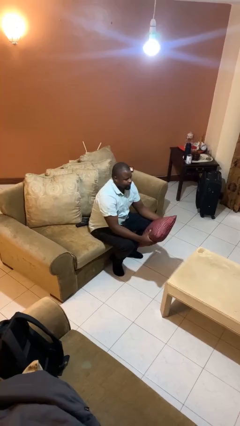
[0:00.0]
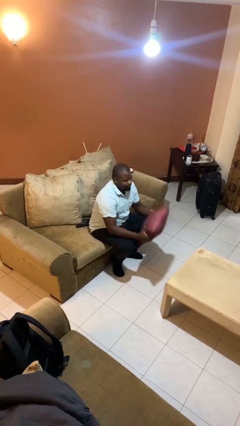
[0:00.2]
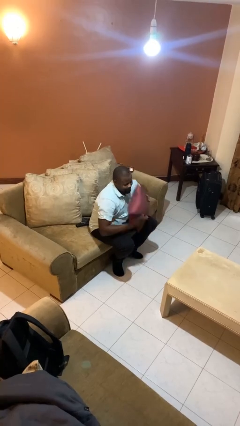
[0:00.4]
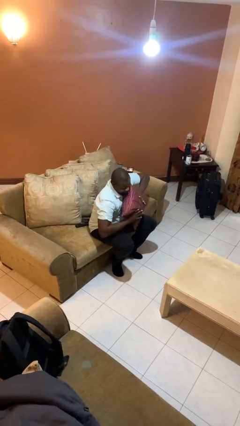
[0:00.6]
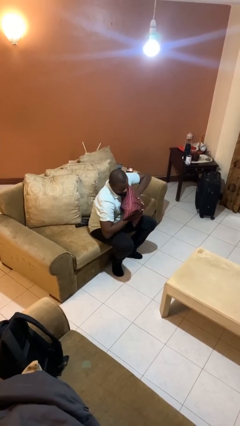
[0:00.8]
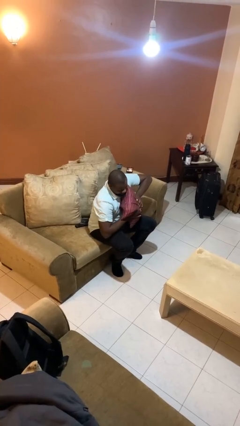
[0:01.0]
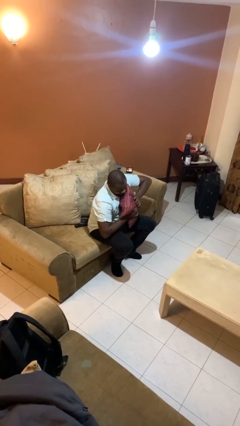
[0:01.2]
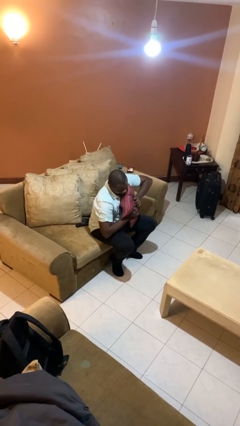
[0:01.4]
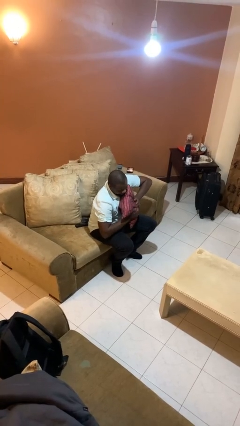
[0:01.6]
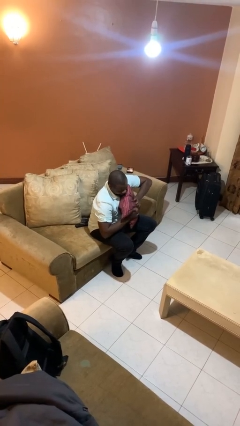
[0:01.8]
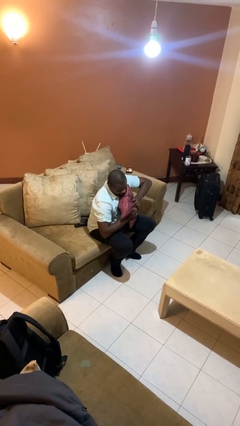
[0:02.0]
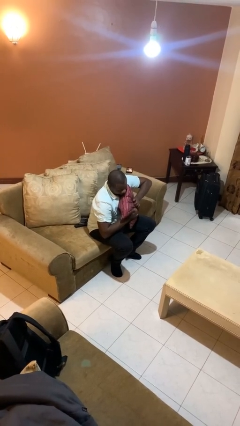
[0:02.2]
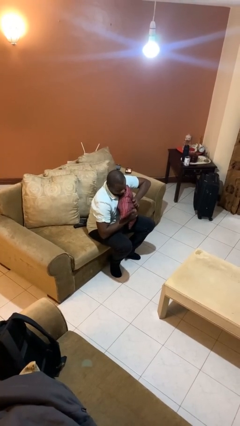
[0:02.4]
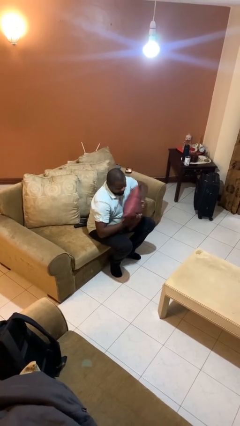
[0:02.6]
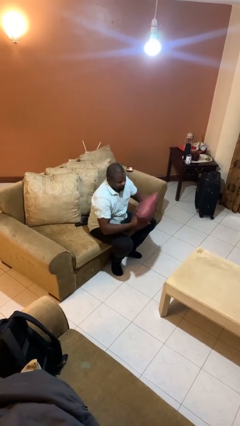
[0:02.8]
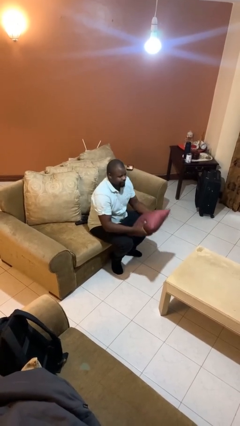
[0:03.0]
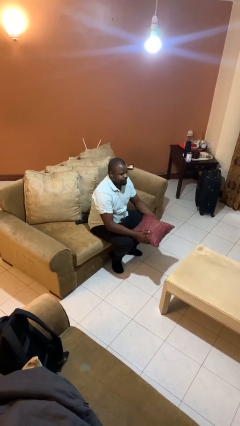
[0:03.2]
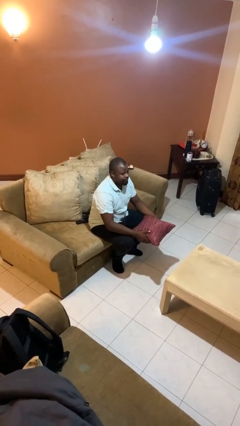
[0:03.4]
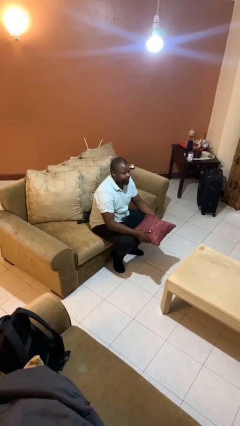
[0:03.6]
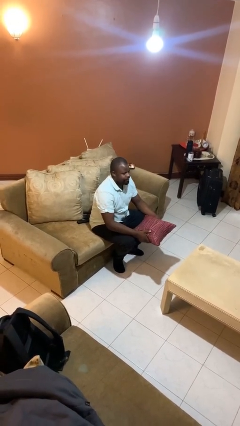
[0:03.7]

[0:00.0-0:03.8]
person squeezes object

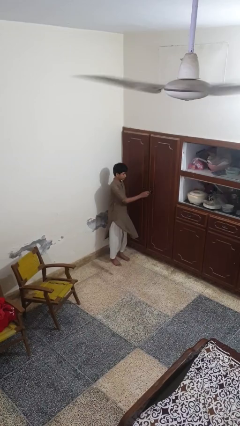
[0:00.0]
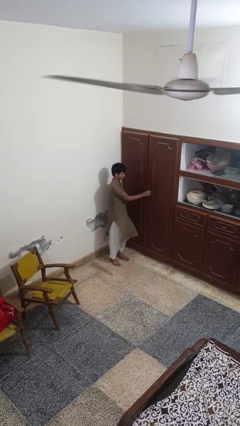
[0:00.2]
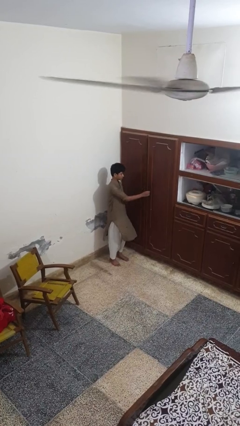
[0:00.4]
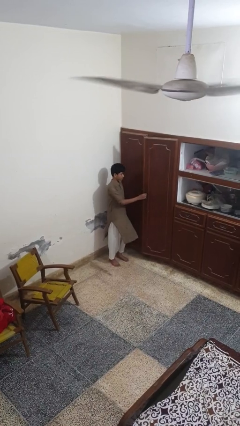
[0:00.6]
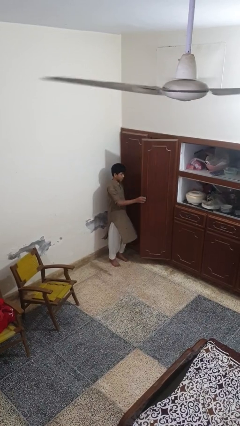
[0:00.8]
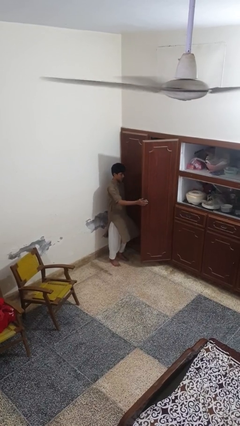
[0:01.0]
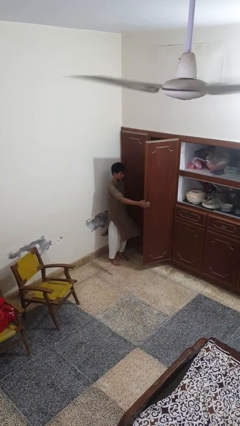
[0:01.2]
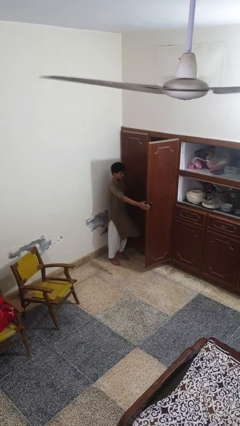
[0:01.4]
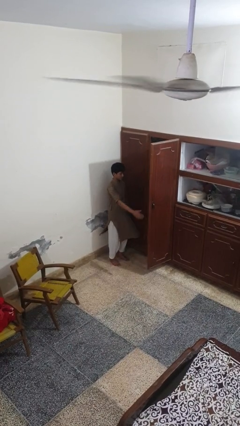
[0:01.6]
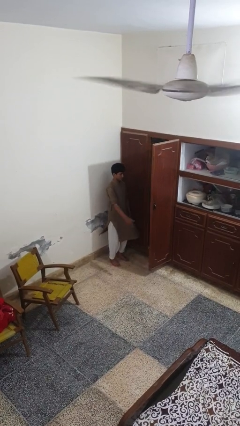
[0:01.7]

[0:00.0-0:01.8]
person opens closet door

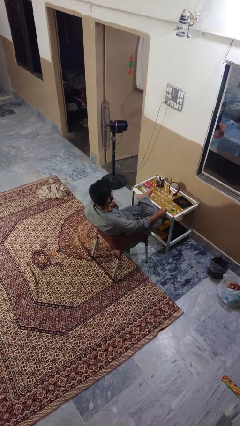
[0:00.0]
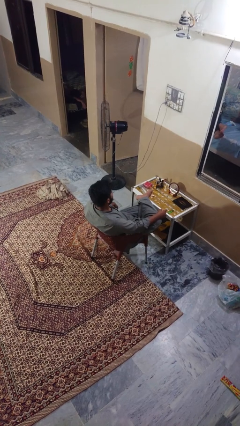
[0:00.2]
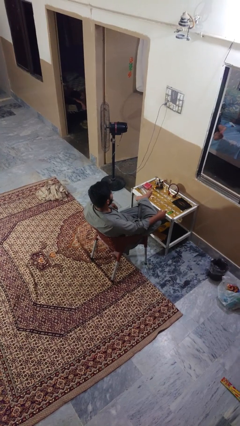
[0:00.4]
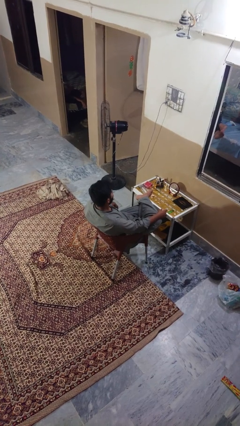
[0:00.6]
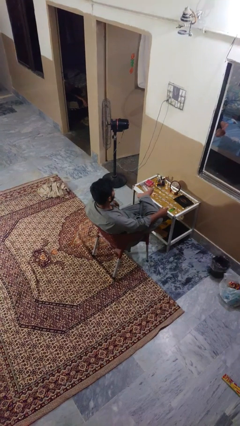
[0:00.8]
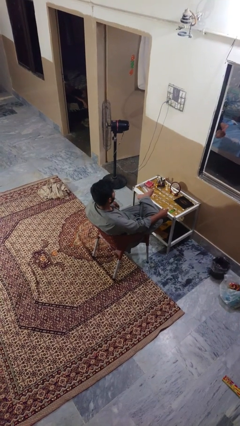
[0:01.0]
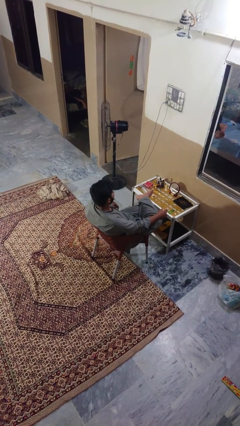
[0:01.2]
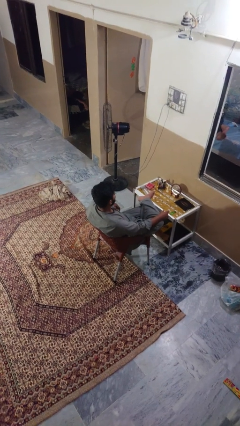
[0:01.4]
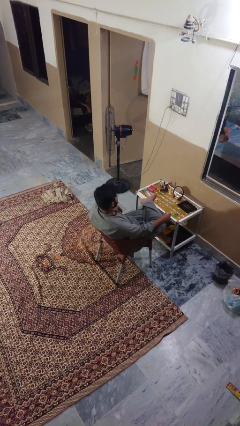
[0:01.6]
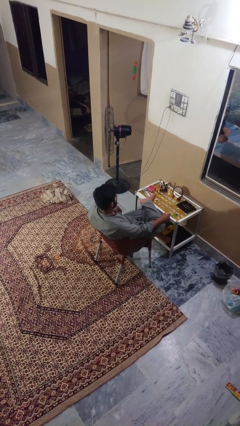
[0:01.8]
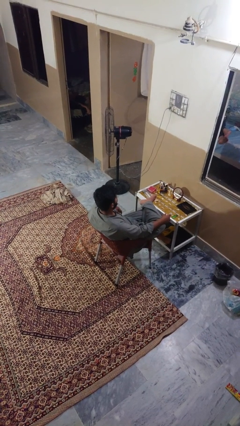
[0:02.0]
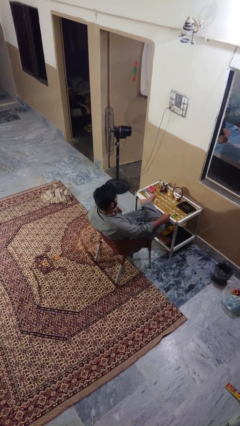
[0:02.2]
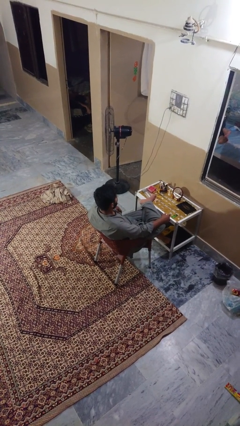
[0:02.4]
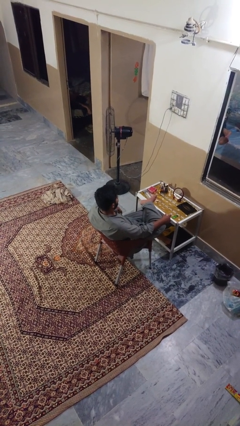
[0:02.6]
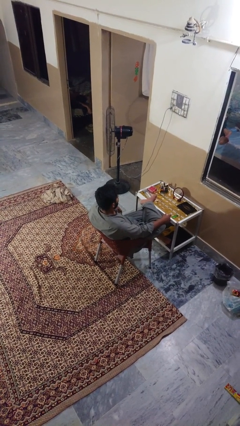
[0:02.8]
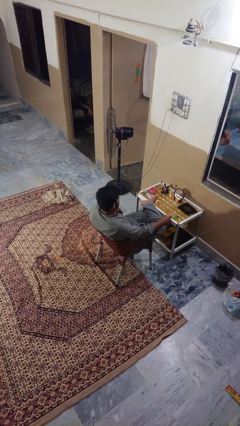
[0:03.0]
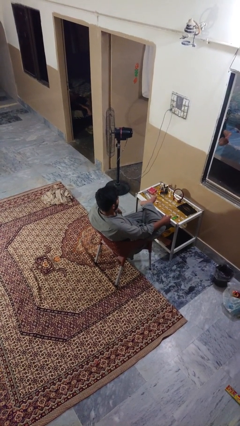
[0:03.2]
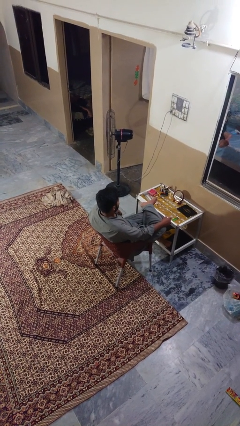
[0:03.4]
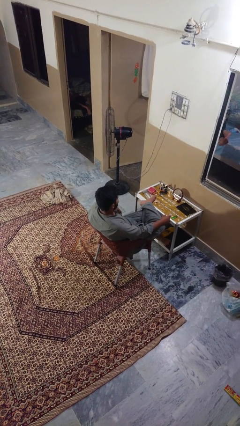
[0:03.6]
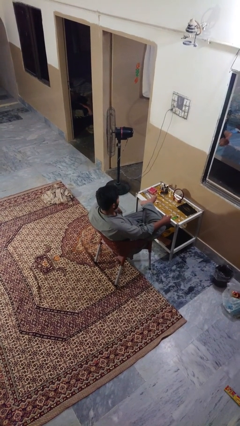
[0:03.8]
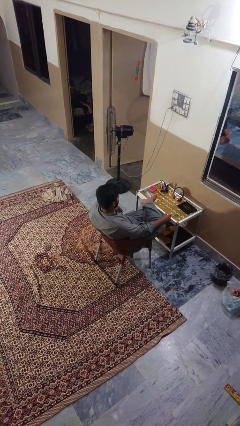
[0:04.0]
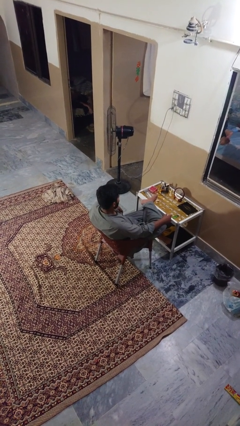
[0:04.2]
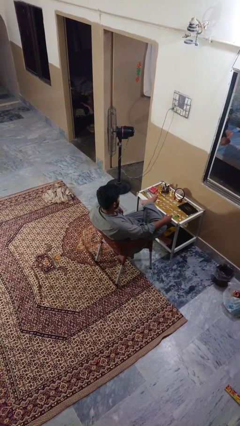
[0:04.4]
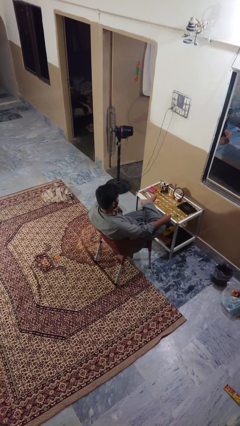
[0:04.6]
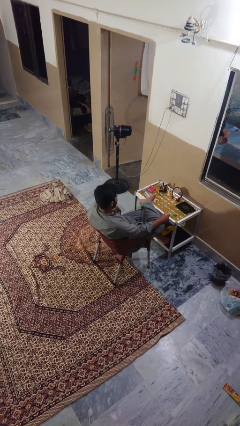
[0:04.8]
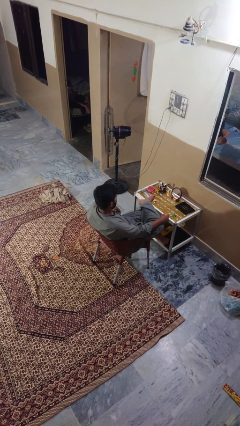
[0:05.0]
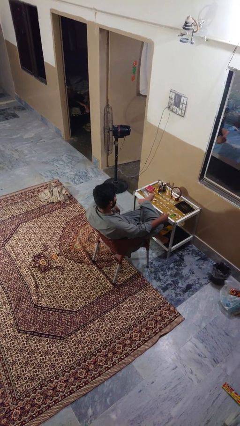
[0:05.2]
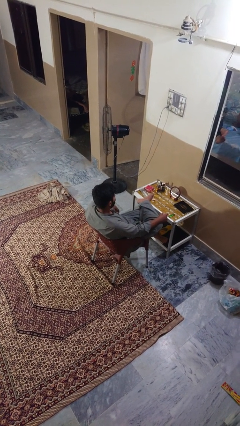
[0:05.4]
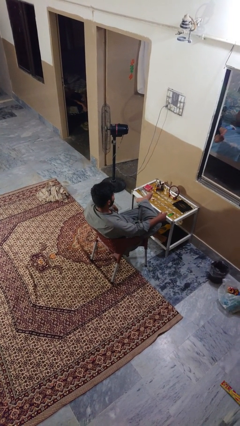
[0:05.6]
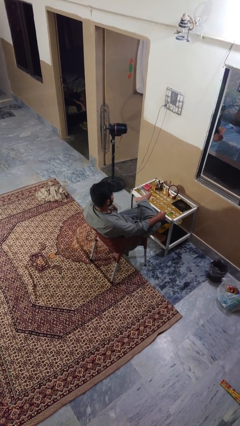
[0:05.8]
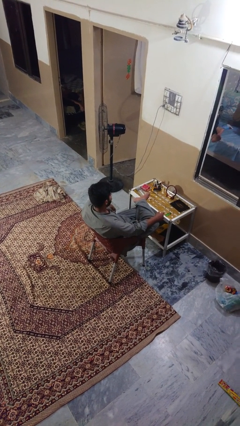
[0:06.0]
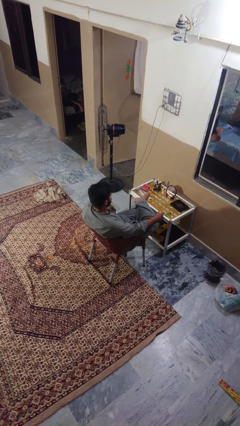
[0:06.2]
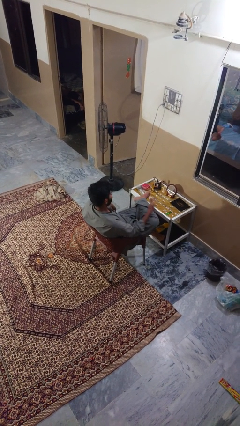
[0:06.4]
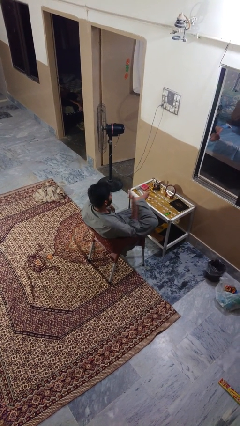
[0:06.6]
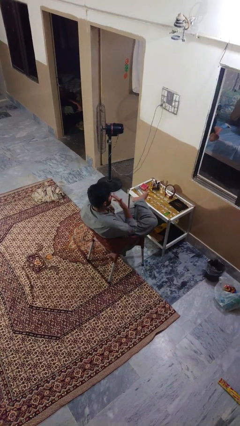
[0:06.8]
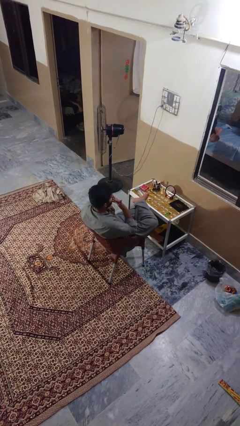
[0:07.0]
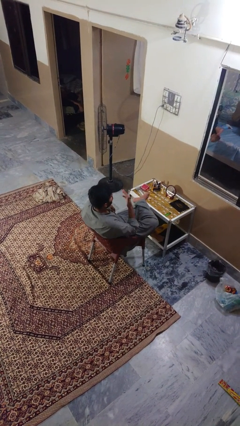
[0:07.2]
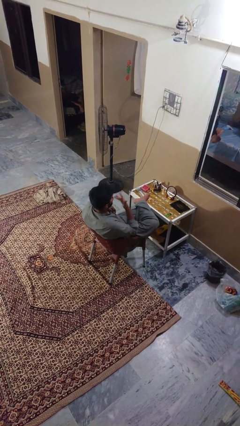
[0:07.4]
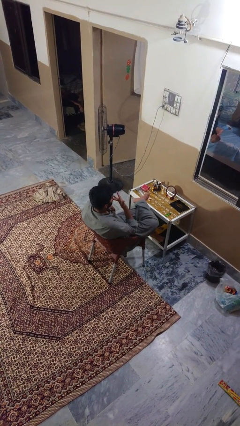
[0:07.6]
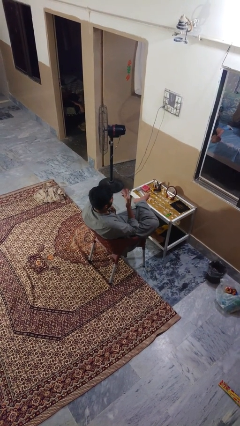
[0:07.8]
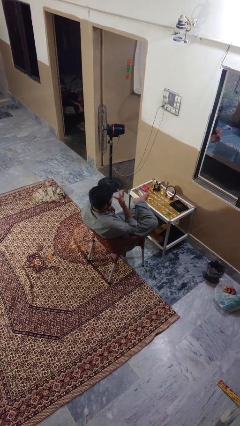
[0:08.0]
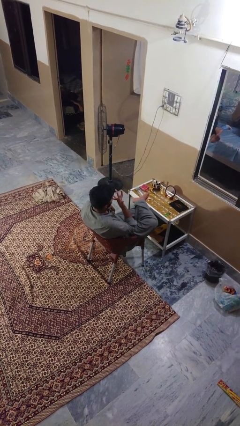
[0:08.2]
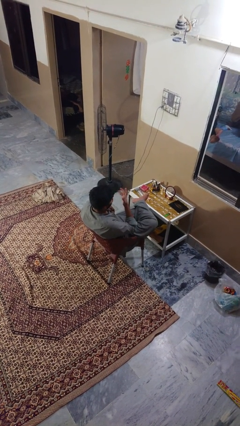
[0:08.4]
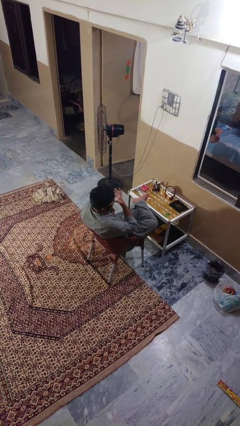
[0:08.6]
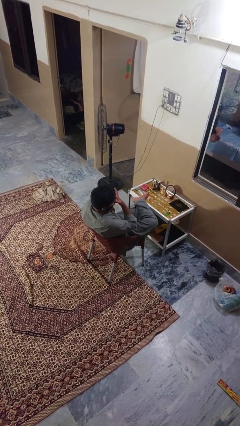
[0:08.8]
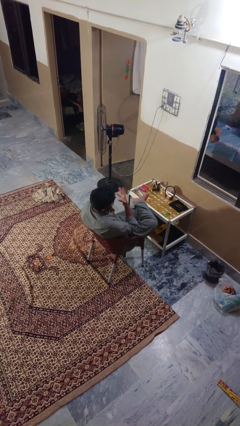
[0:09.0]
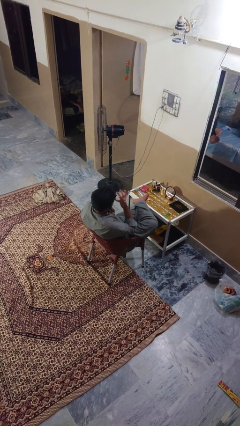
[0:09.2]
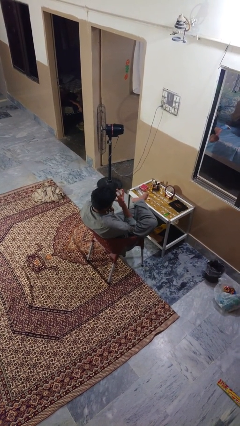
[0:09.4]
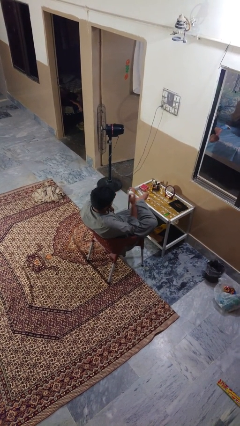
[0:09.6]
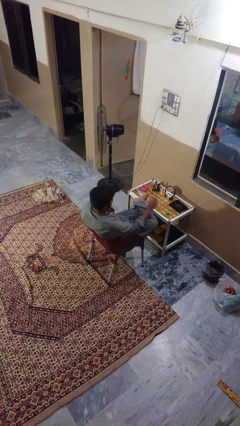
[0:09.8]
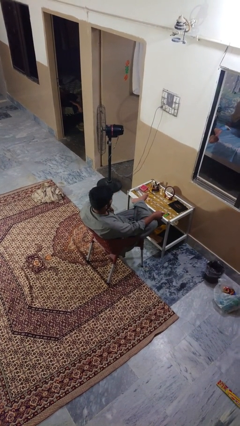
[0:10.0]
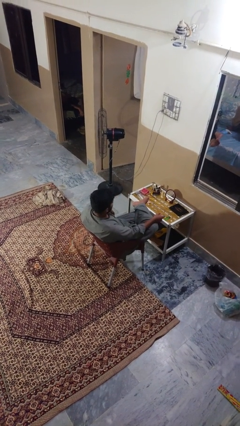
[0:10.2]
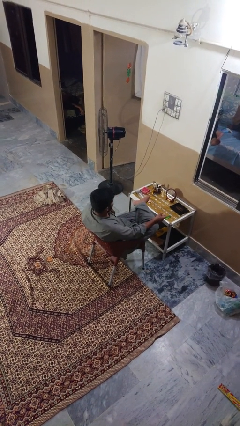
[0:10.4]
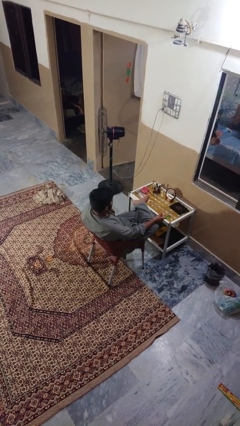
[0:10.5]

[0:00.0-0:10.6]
person licks fingers

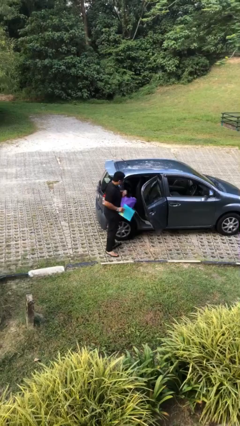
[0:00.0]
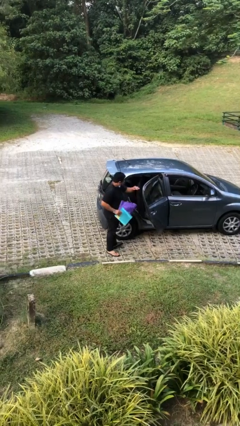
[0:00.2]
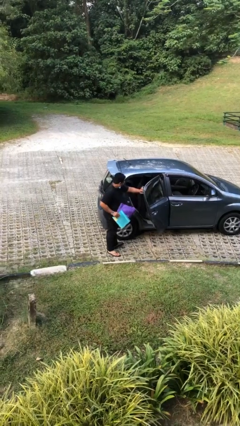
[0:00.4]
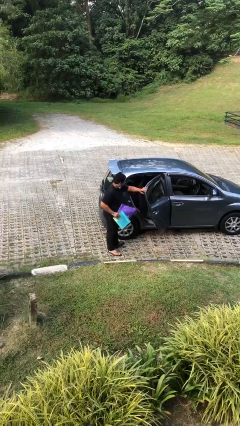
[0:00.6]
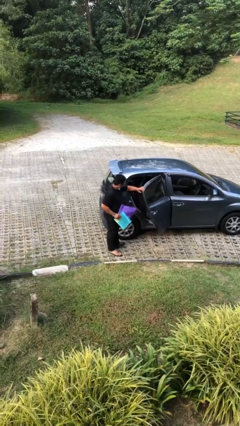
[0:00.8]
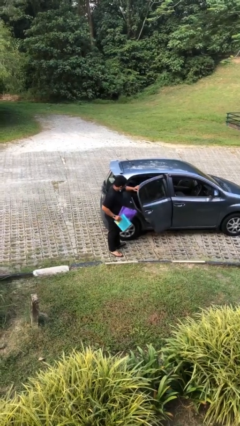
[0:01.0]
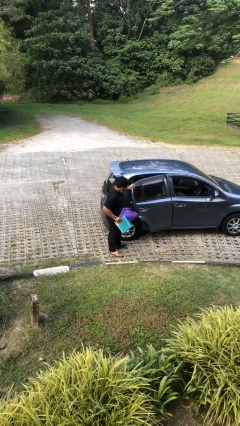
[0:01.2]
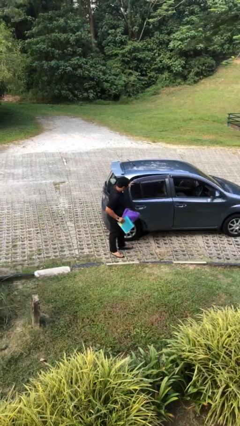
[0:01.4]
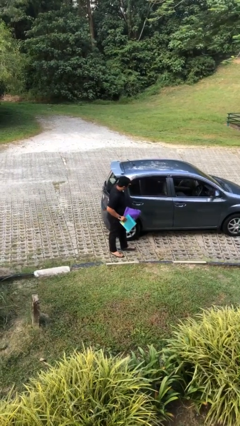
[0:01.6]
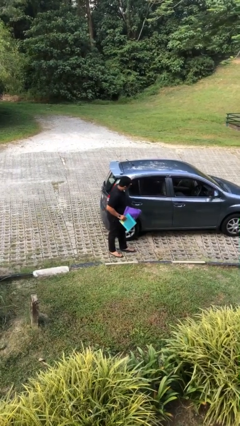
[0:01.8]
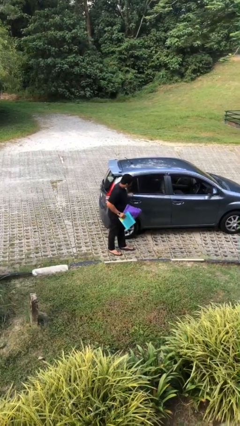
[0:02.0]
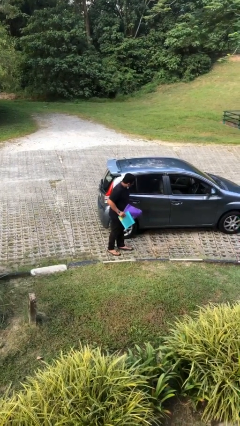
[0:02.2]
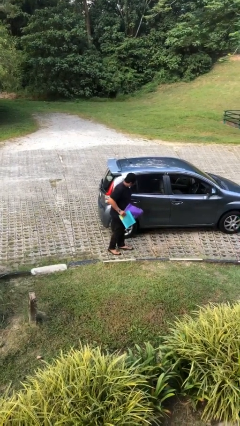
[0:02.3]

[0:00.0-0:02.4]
person closes car door
